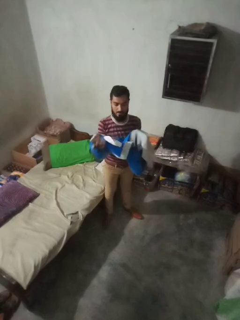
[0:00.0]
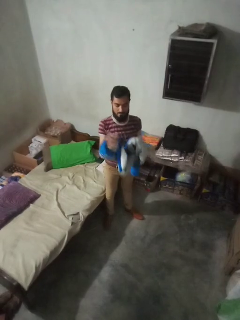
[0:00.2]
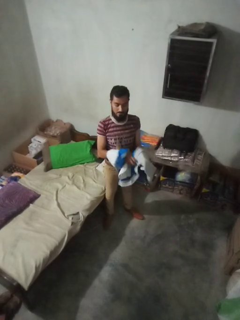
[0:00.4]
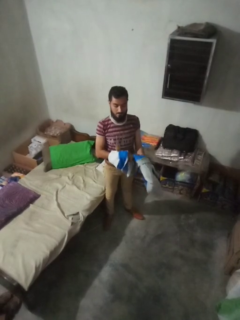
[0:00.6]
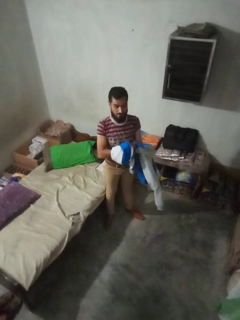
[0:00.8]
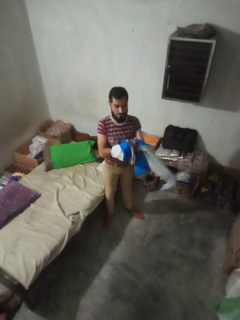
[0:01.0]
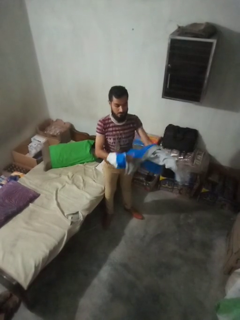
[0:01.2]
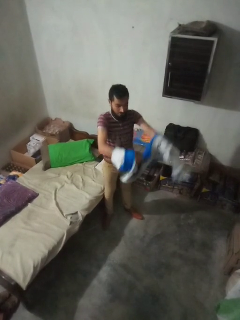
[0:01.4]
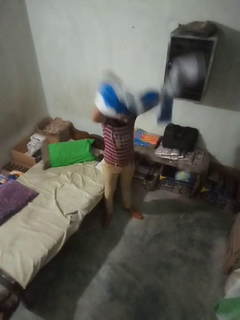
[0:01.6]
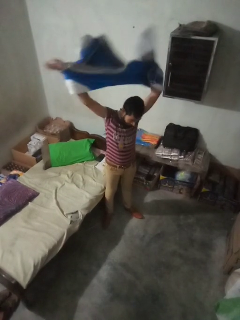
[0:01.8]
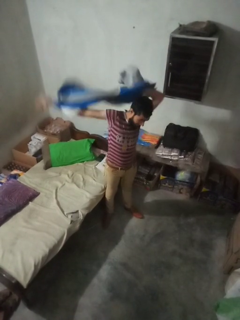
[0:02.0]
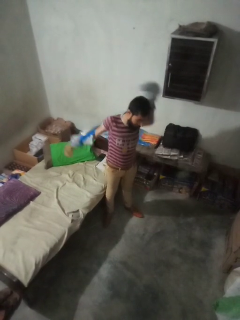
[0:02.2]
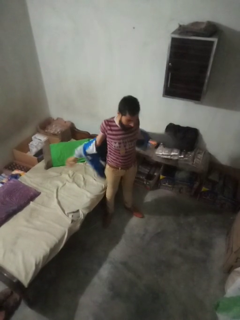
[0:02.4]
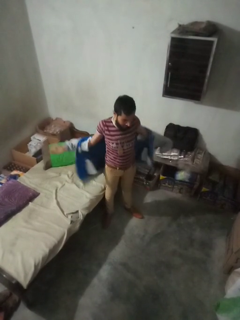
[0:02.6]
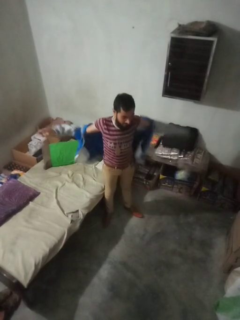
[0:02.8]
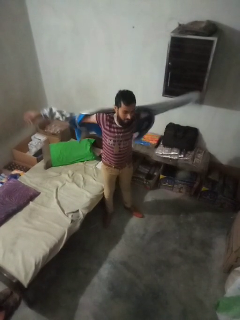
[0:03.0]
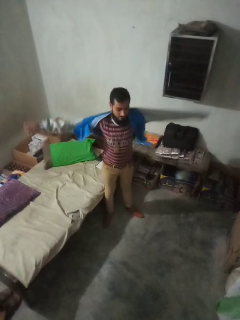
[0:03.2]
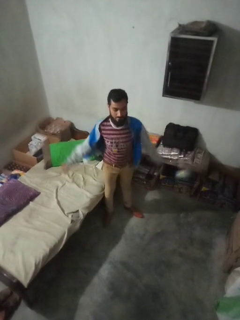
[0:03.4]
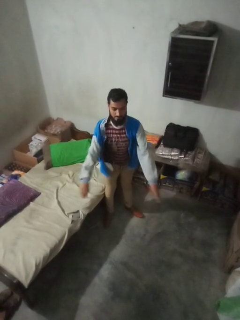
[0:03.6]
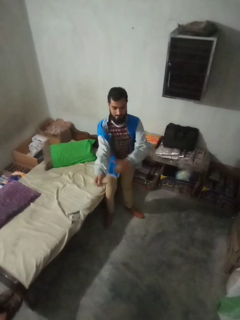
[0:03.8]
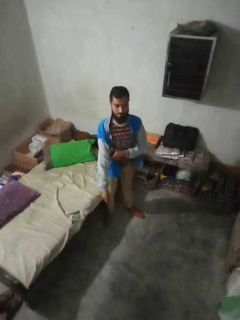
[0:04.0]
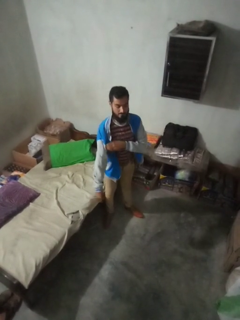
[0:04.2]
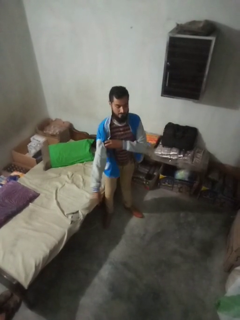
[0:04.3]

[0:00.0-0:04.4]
person puts on jacket

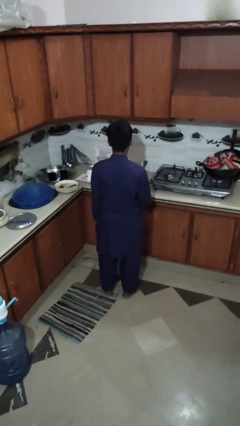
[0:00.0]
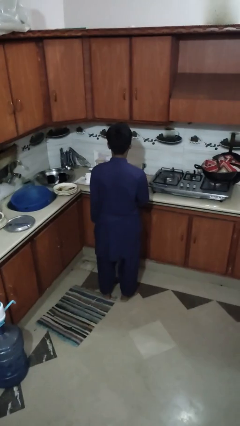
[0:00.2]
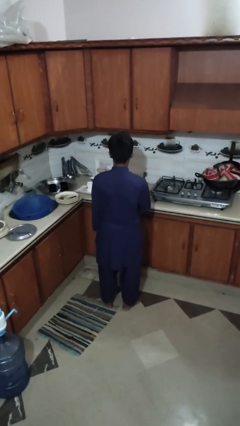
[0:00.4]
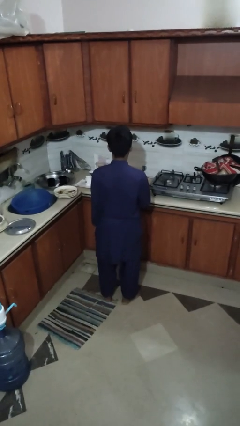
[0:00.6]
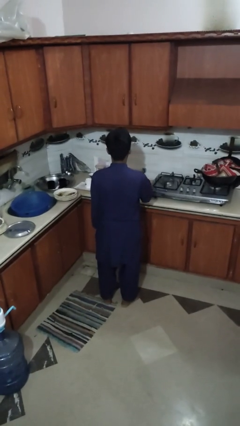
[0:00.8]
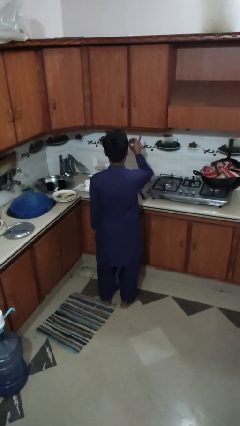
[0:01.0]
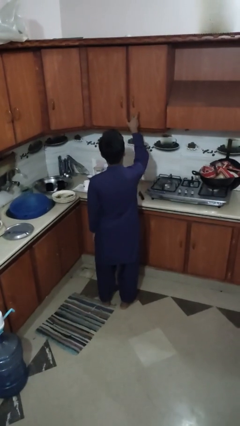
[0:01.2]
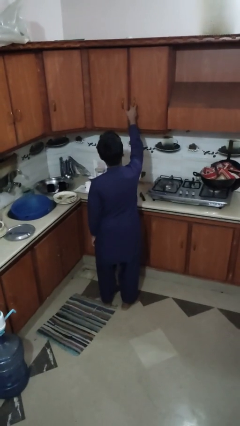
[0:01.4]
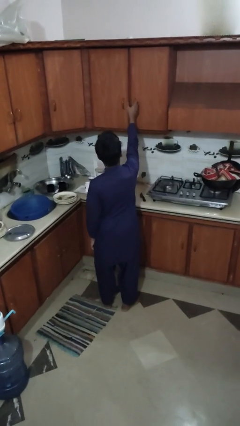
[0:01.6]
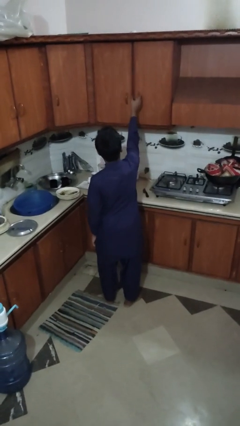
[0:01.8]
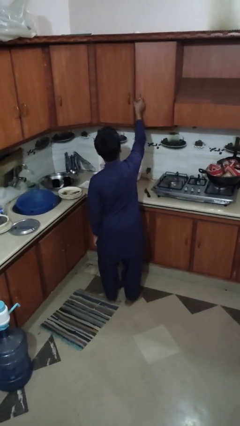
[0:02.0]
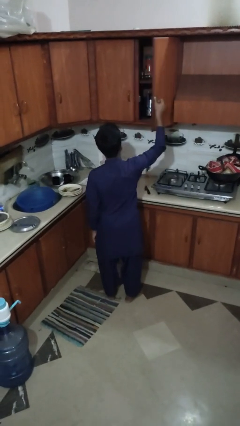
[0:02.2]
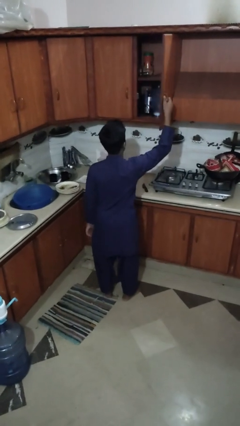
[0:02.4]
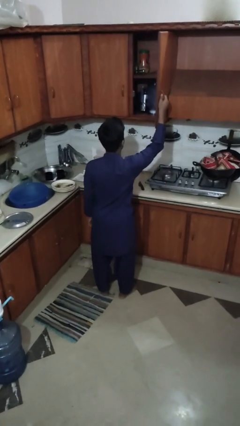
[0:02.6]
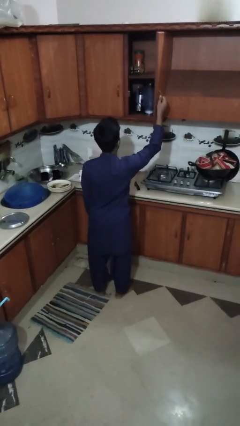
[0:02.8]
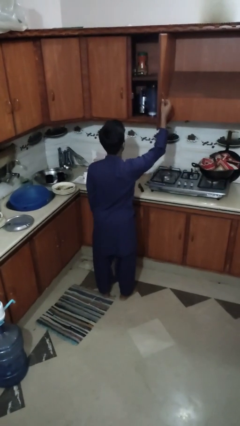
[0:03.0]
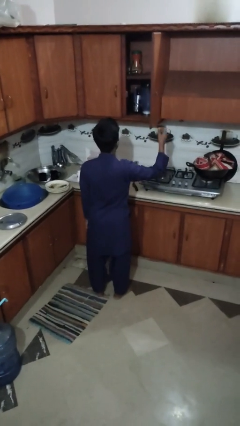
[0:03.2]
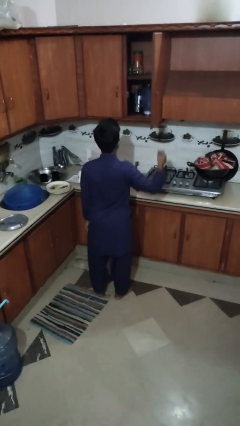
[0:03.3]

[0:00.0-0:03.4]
person opens cabinet

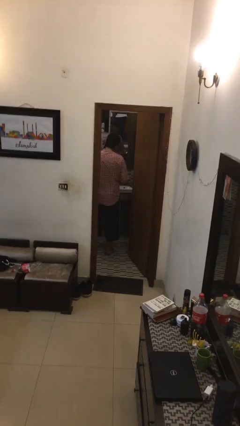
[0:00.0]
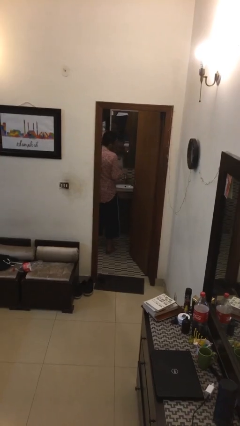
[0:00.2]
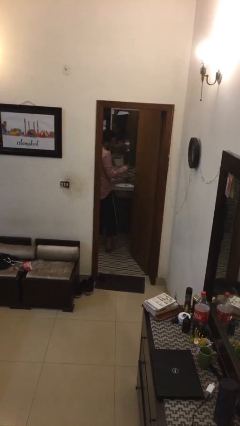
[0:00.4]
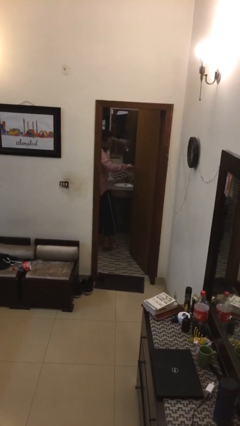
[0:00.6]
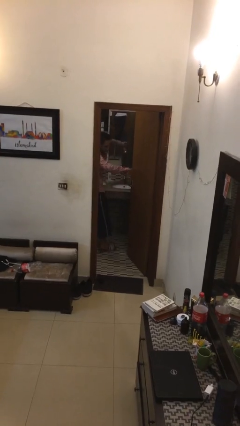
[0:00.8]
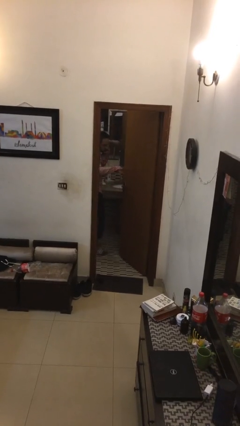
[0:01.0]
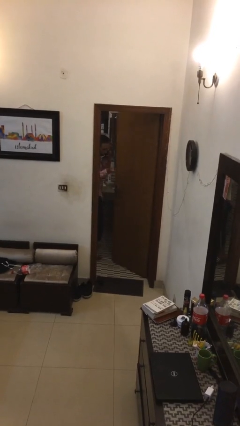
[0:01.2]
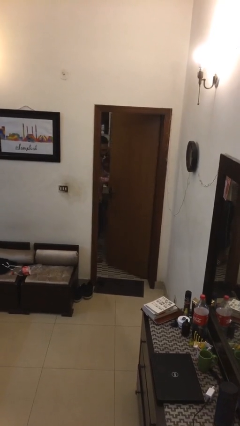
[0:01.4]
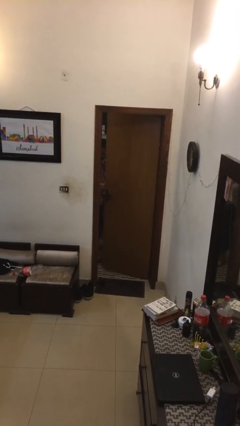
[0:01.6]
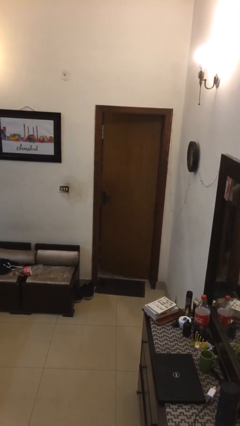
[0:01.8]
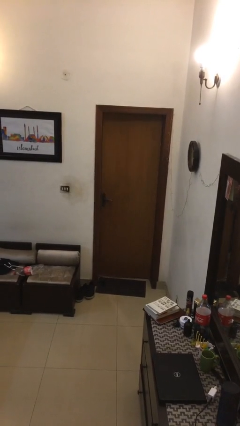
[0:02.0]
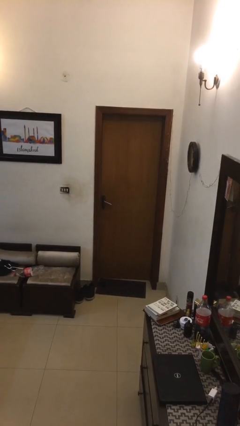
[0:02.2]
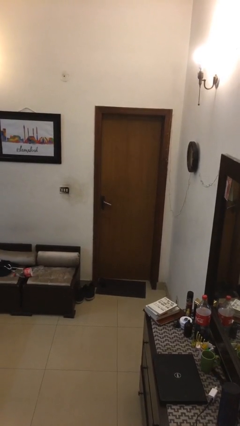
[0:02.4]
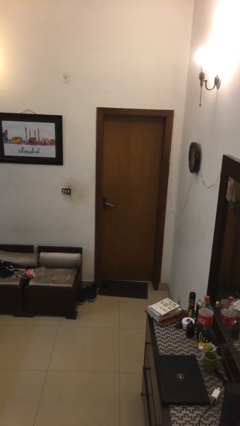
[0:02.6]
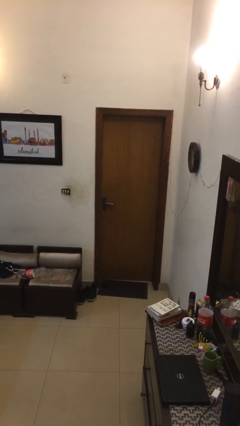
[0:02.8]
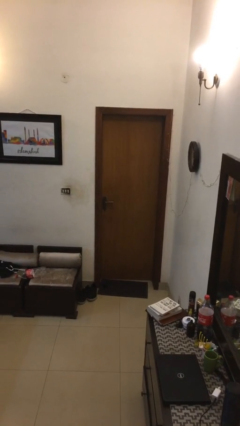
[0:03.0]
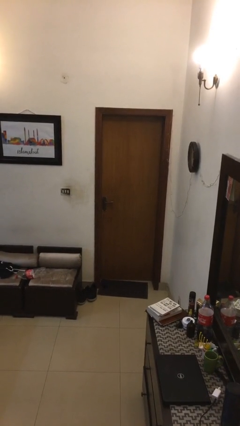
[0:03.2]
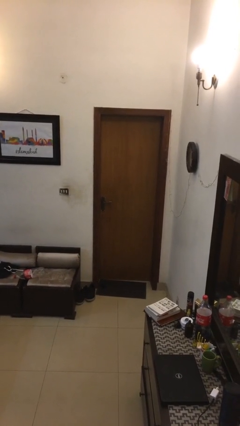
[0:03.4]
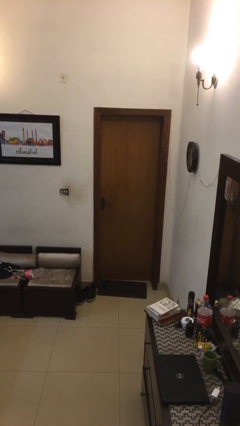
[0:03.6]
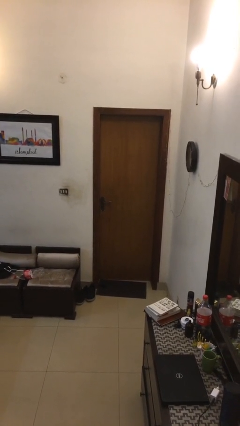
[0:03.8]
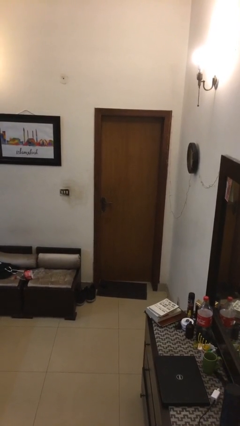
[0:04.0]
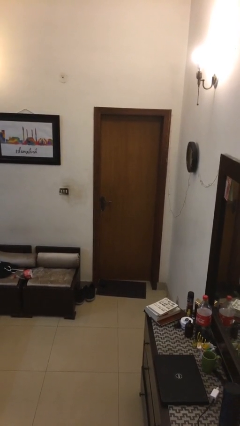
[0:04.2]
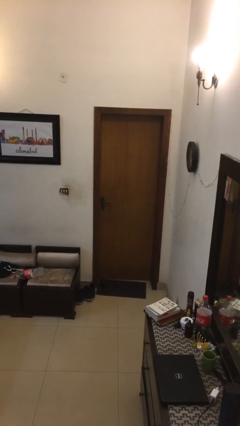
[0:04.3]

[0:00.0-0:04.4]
person closes facility door

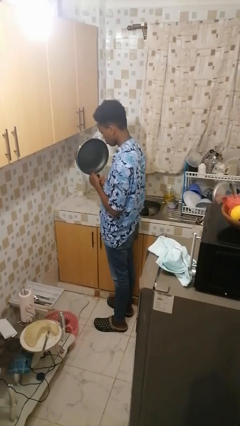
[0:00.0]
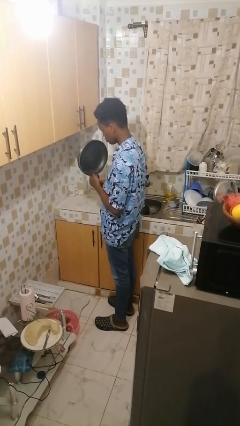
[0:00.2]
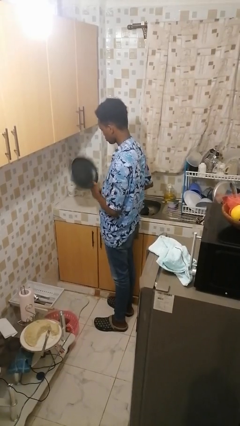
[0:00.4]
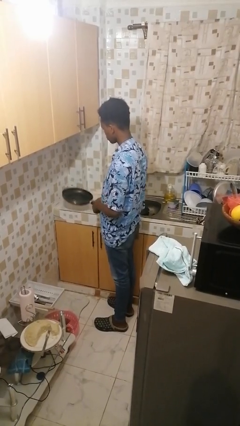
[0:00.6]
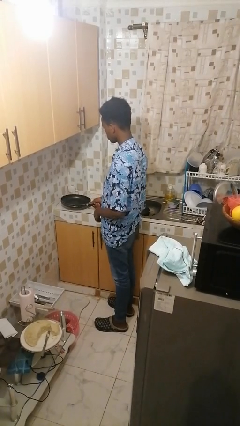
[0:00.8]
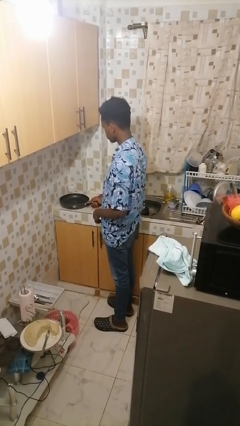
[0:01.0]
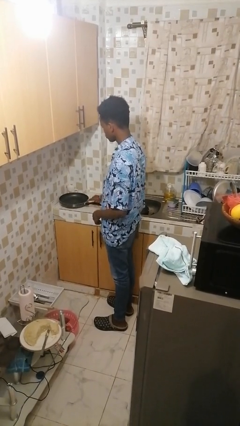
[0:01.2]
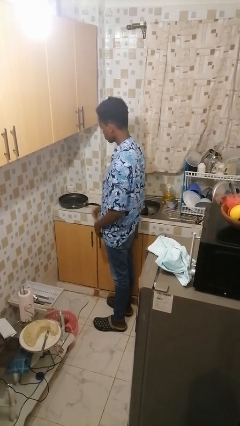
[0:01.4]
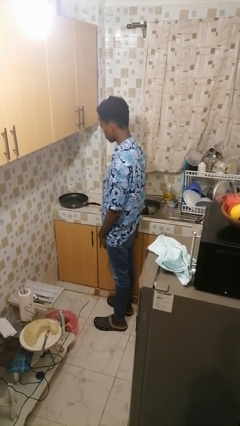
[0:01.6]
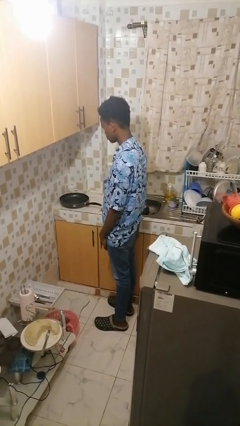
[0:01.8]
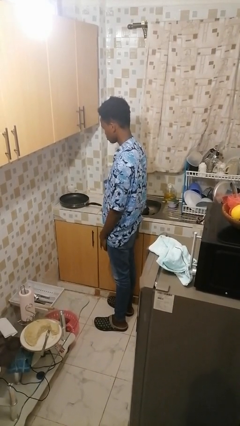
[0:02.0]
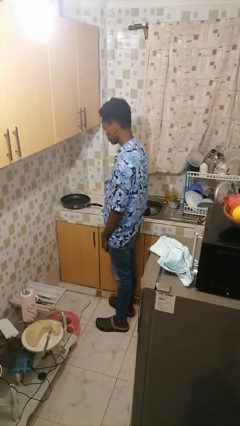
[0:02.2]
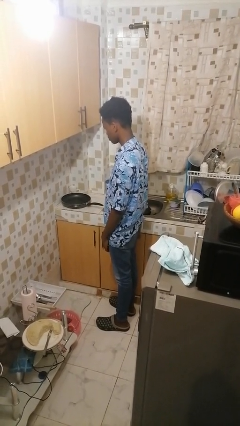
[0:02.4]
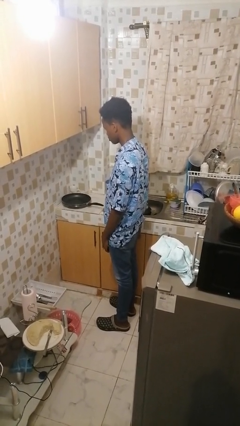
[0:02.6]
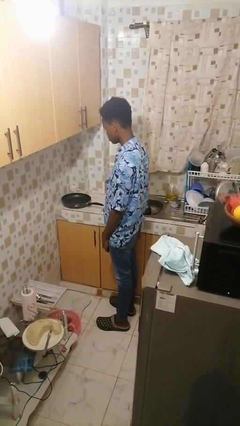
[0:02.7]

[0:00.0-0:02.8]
person puts down object on countertop

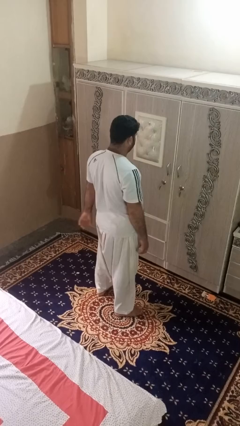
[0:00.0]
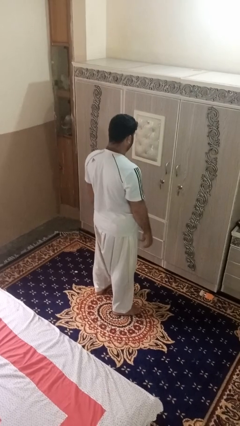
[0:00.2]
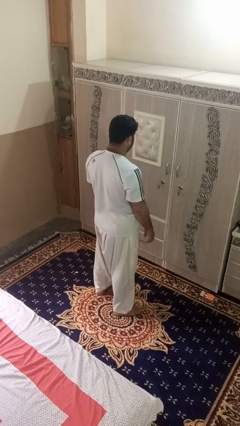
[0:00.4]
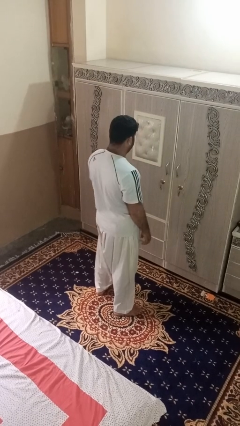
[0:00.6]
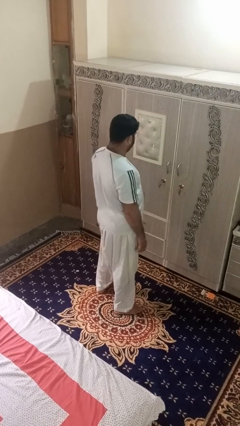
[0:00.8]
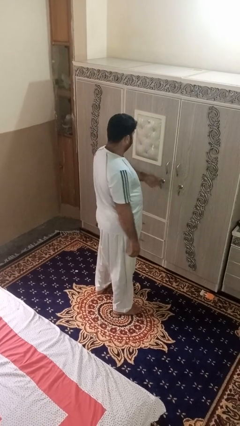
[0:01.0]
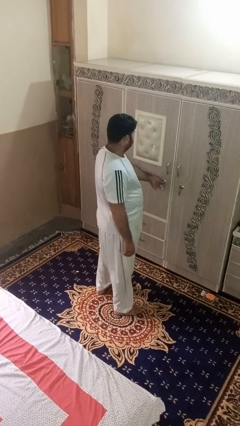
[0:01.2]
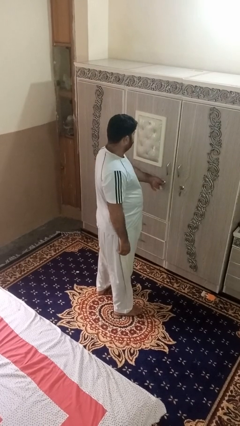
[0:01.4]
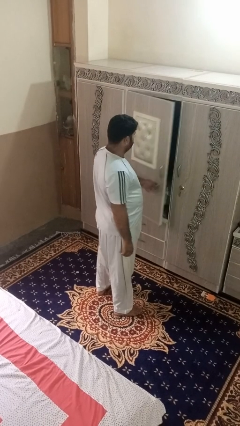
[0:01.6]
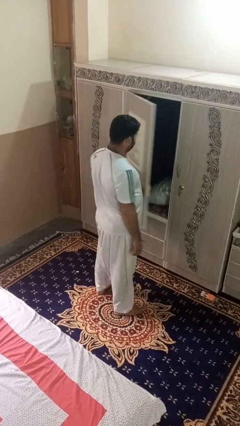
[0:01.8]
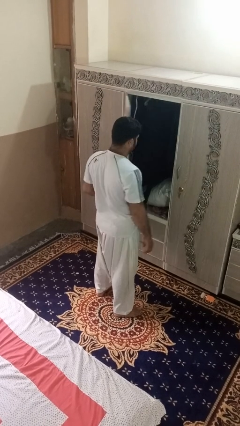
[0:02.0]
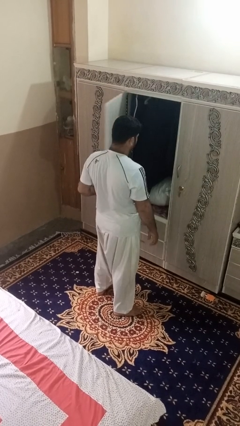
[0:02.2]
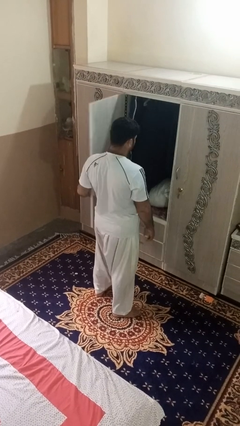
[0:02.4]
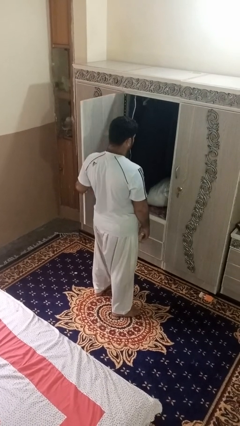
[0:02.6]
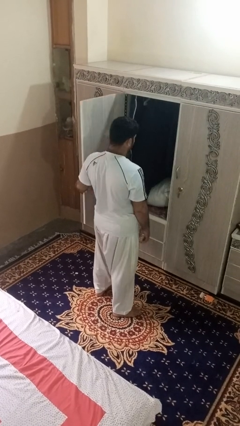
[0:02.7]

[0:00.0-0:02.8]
person opens dresser drawer

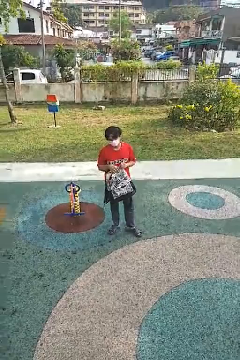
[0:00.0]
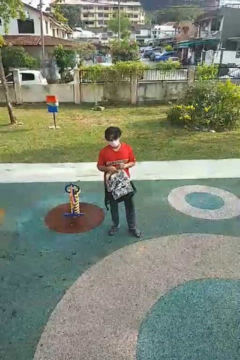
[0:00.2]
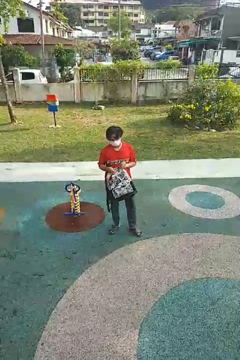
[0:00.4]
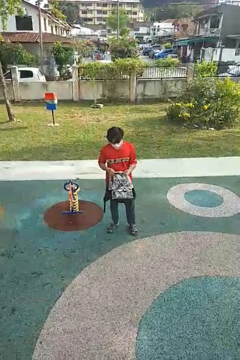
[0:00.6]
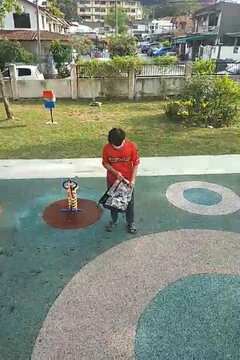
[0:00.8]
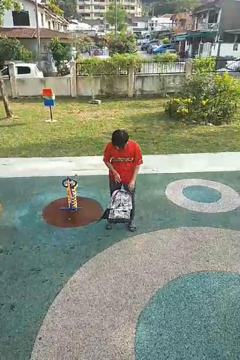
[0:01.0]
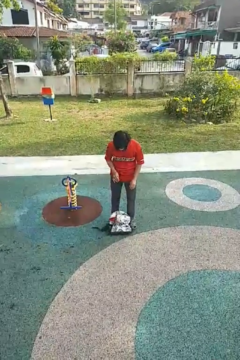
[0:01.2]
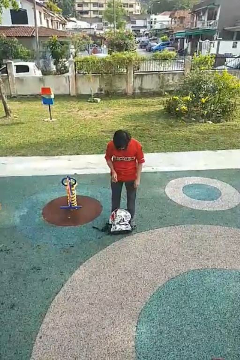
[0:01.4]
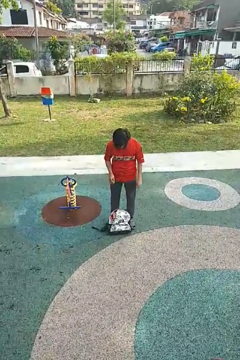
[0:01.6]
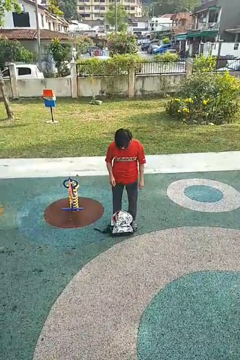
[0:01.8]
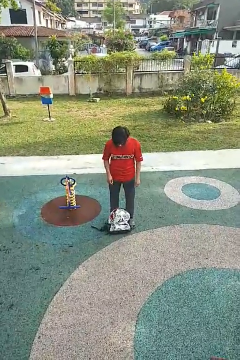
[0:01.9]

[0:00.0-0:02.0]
person drops object
